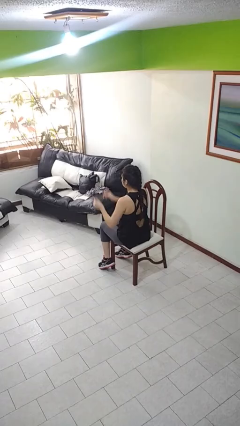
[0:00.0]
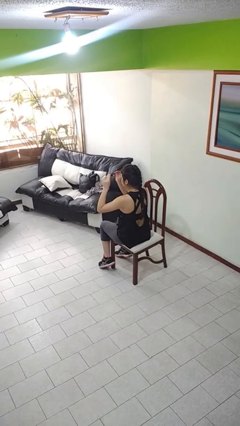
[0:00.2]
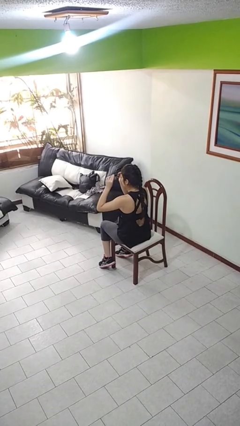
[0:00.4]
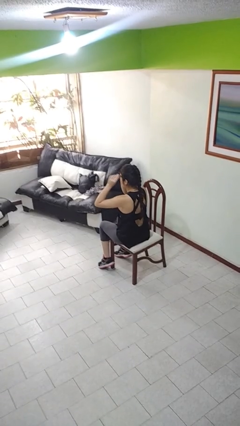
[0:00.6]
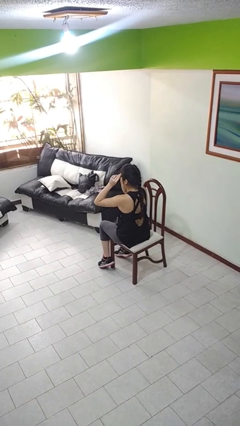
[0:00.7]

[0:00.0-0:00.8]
person puts on glasses

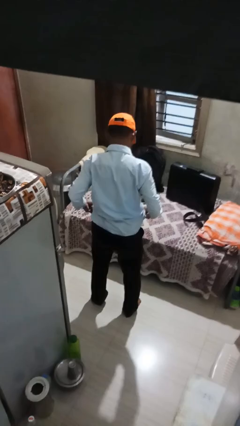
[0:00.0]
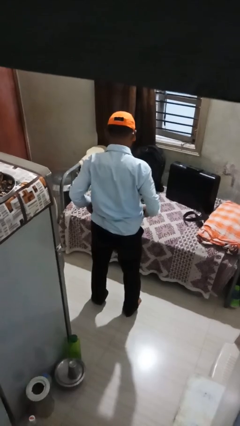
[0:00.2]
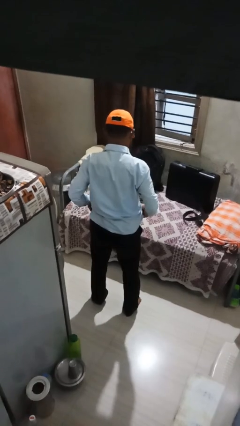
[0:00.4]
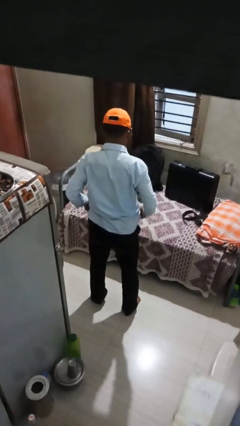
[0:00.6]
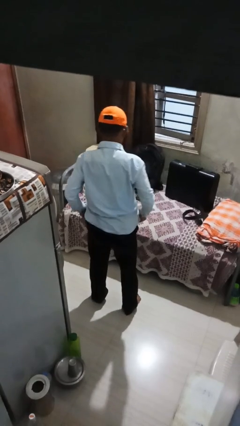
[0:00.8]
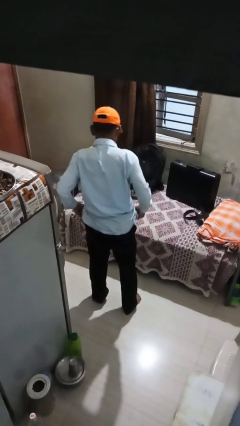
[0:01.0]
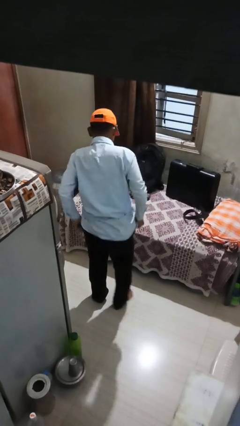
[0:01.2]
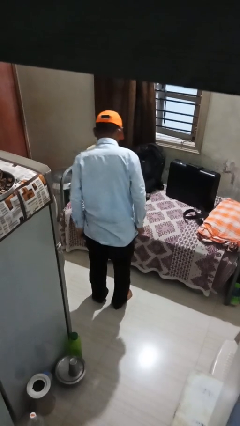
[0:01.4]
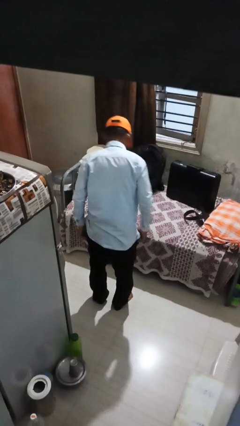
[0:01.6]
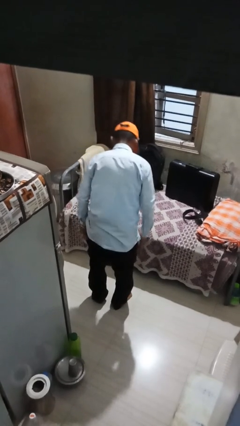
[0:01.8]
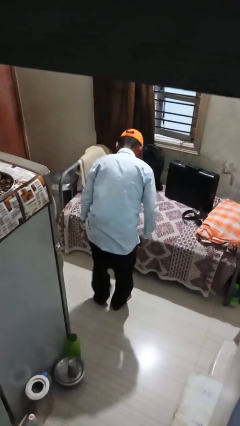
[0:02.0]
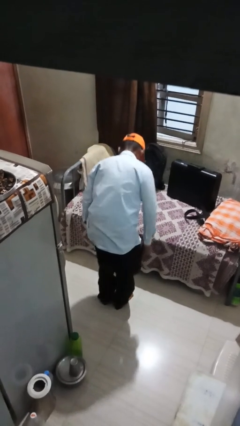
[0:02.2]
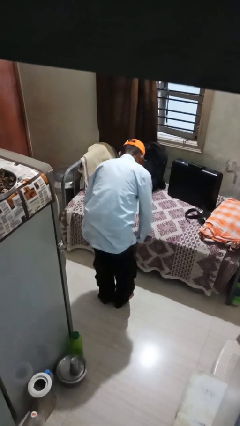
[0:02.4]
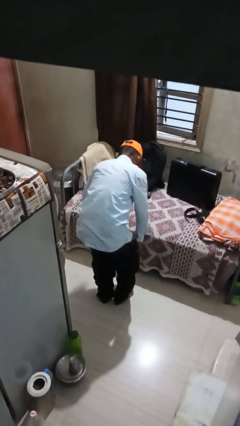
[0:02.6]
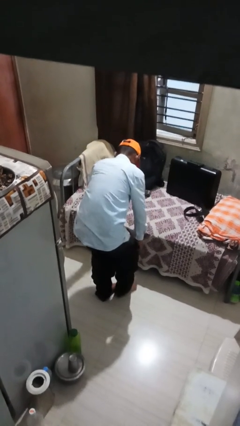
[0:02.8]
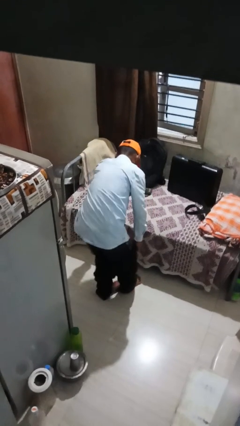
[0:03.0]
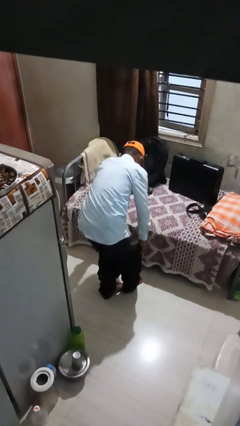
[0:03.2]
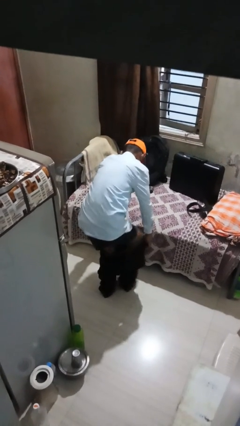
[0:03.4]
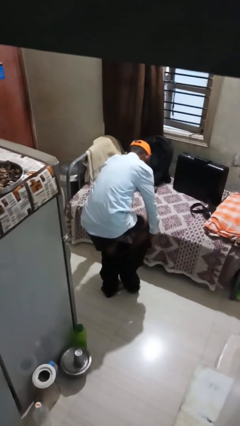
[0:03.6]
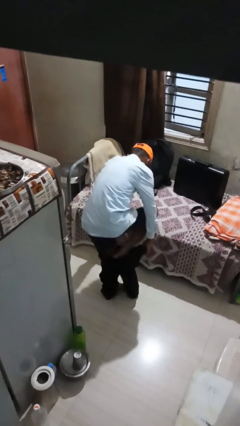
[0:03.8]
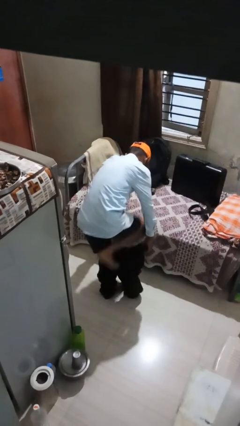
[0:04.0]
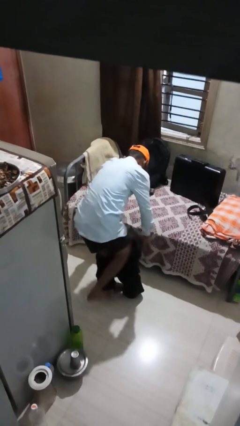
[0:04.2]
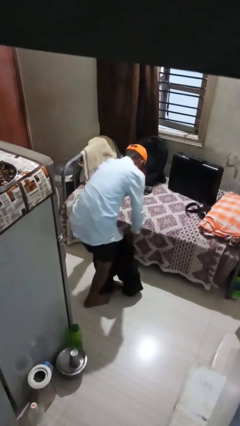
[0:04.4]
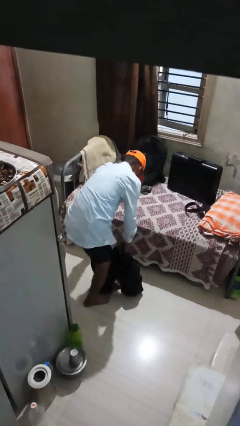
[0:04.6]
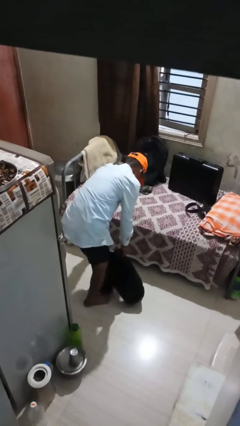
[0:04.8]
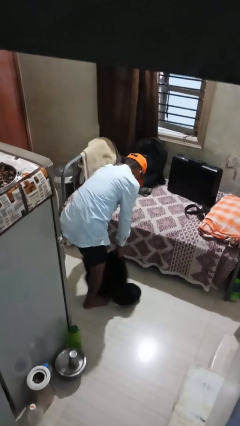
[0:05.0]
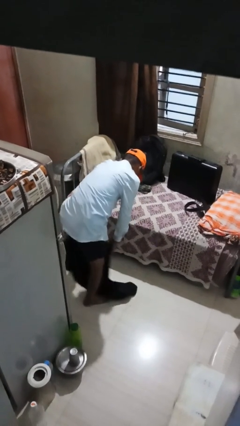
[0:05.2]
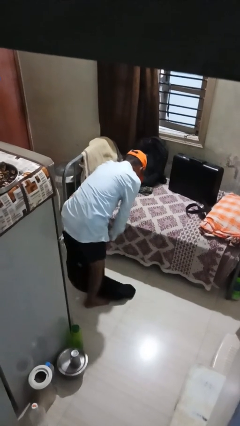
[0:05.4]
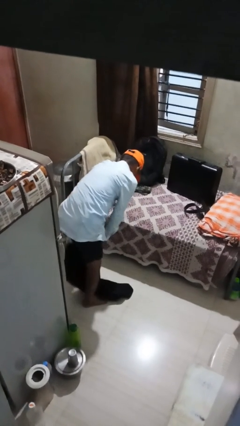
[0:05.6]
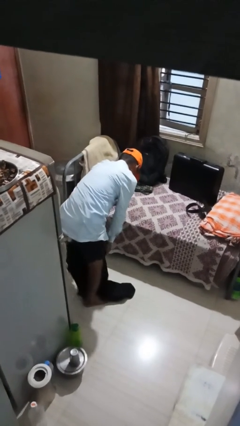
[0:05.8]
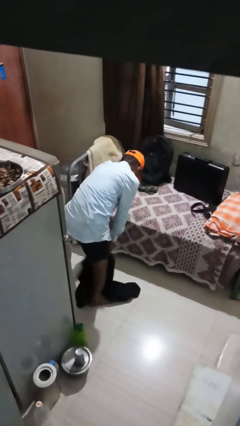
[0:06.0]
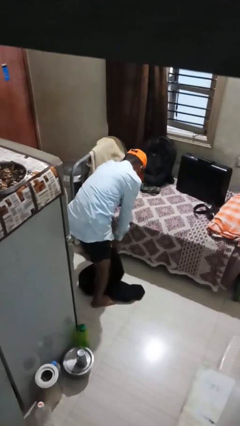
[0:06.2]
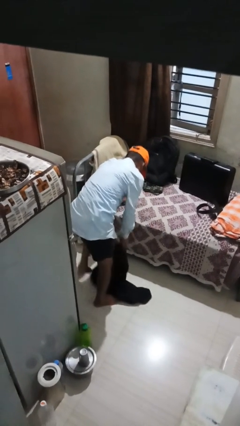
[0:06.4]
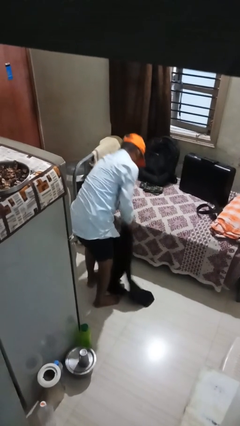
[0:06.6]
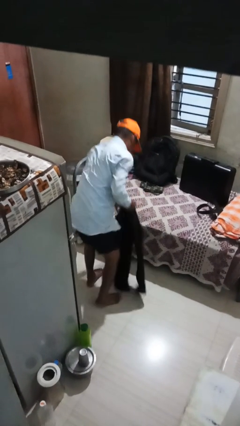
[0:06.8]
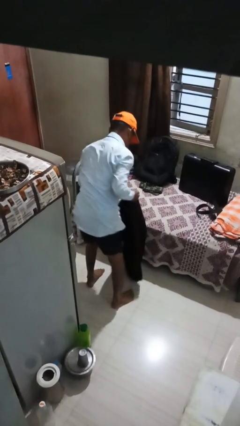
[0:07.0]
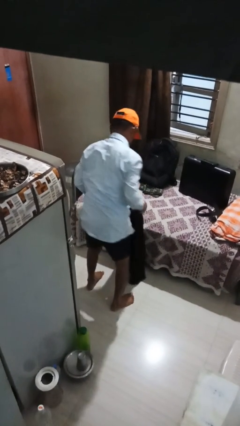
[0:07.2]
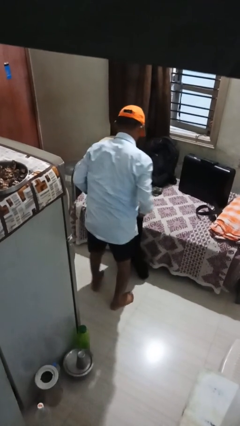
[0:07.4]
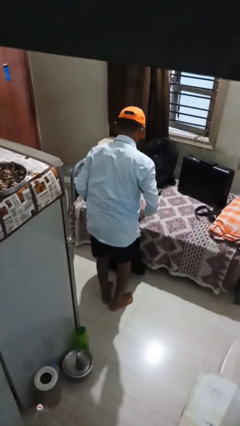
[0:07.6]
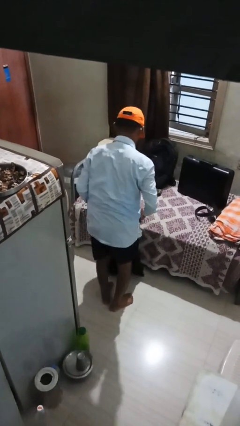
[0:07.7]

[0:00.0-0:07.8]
person takes off pants

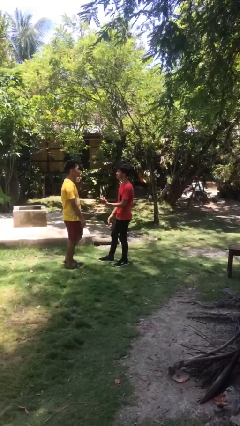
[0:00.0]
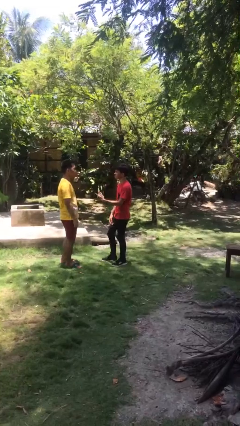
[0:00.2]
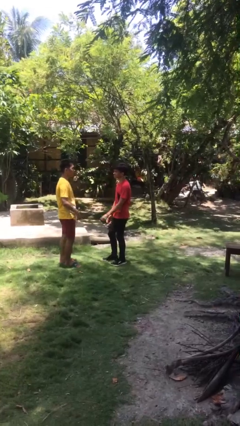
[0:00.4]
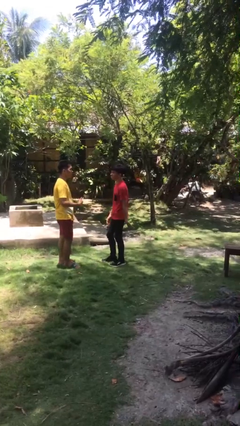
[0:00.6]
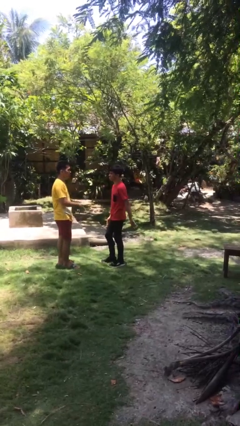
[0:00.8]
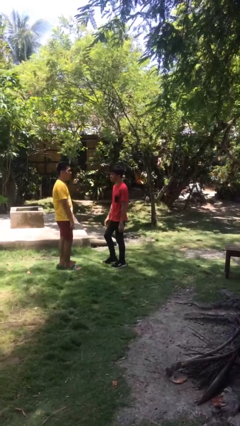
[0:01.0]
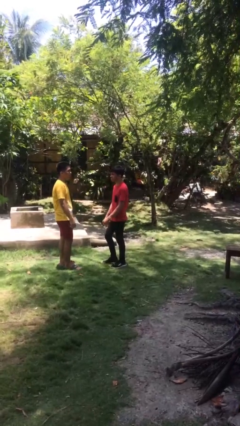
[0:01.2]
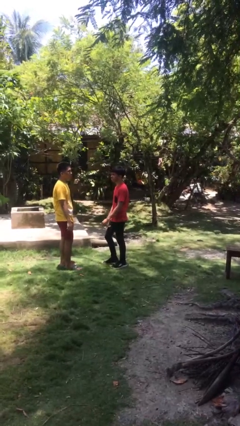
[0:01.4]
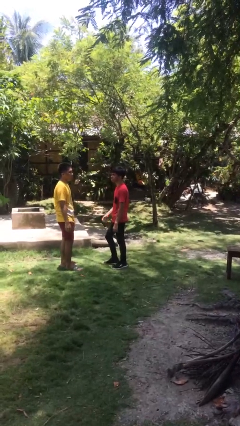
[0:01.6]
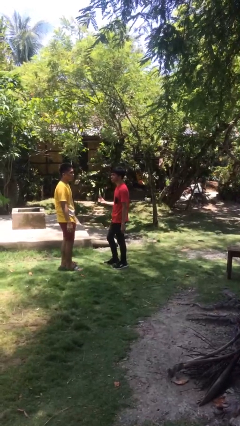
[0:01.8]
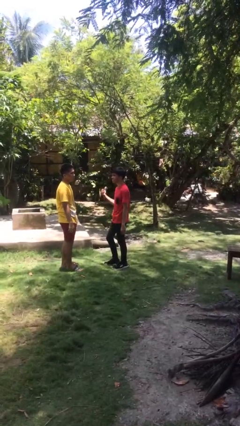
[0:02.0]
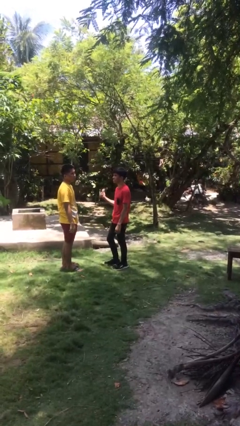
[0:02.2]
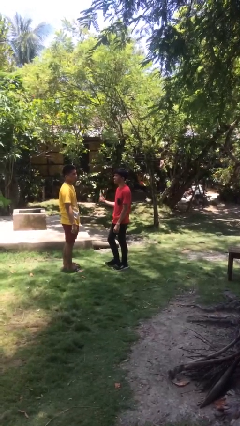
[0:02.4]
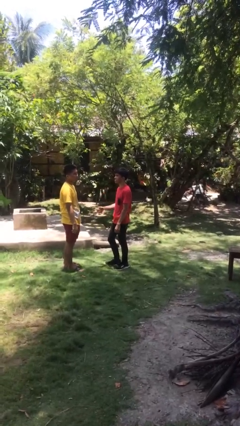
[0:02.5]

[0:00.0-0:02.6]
person talks to person

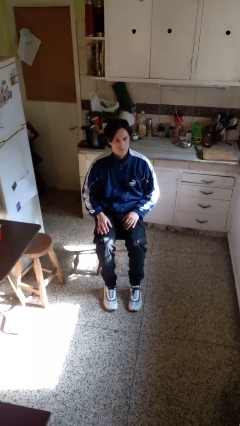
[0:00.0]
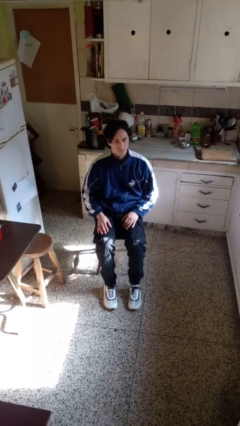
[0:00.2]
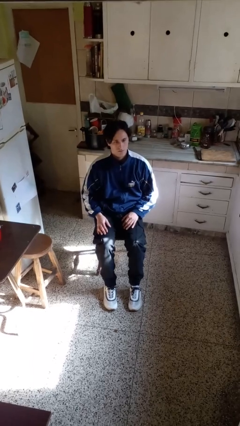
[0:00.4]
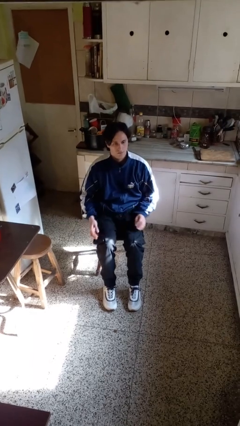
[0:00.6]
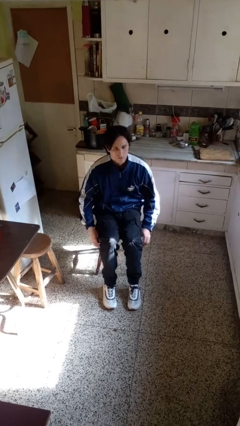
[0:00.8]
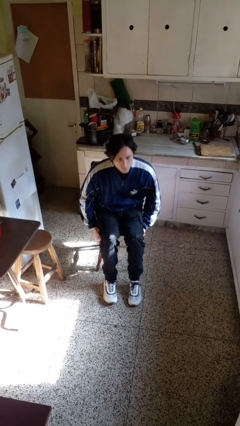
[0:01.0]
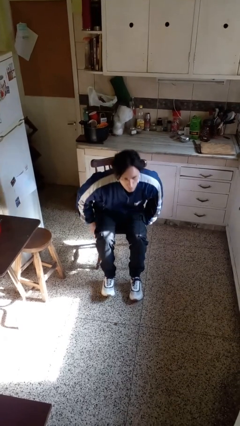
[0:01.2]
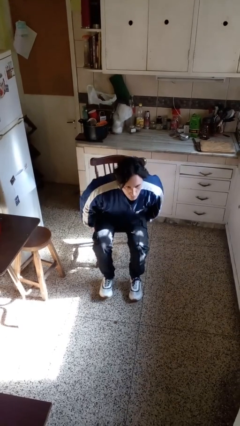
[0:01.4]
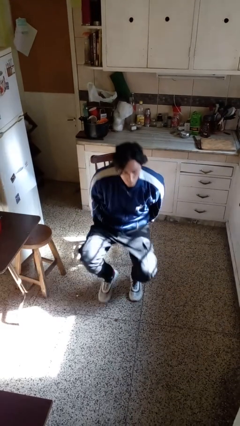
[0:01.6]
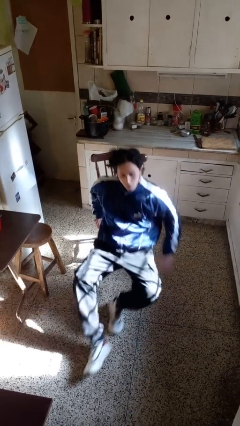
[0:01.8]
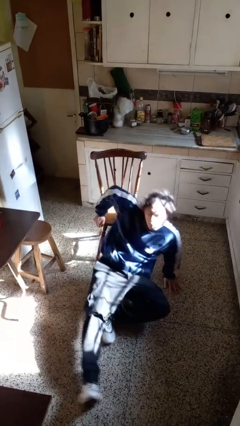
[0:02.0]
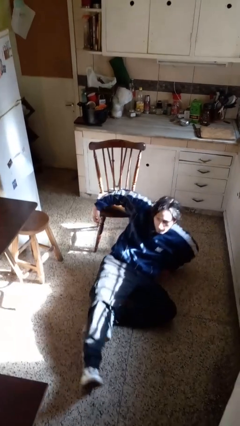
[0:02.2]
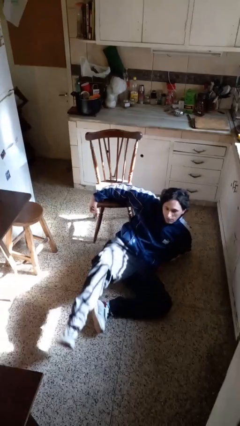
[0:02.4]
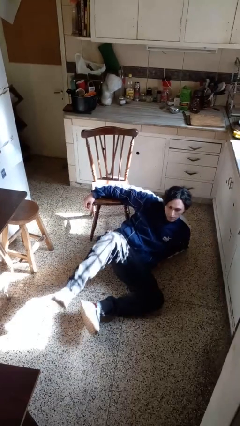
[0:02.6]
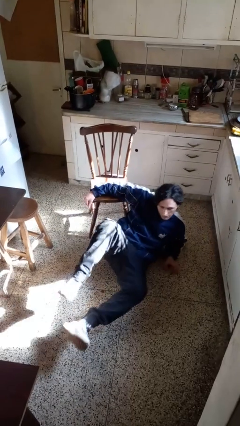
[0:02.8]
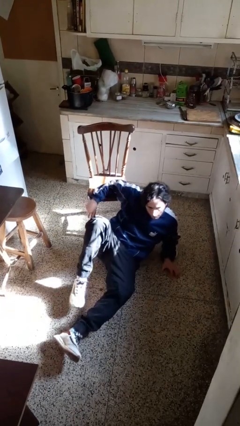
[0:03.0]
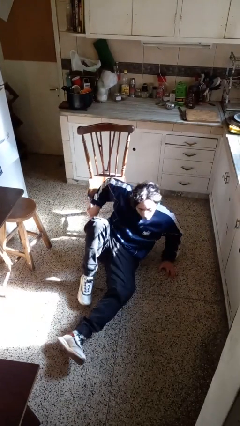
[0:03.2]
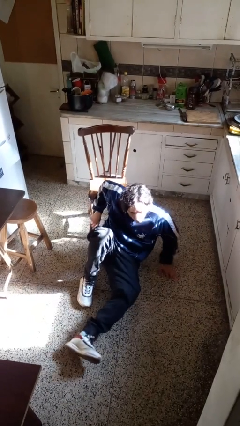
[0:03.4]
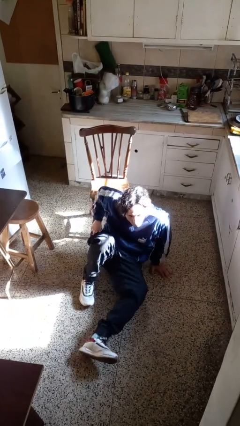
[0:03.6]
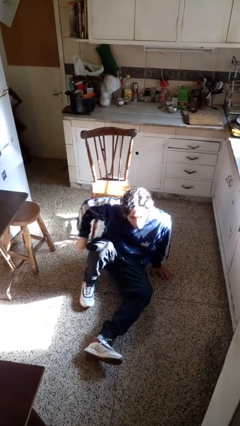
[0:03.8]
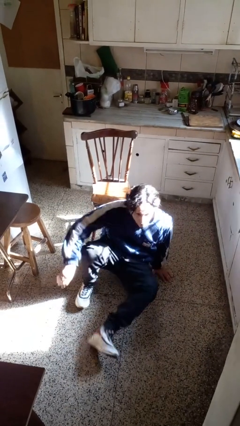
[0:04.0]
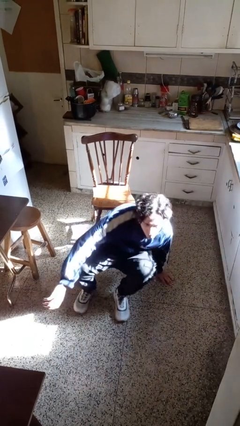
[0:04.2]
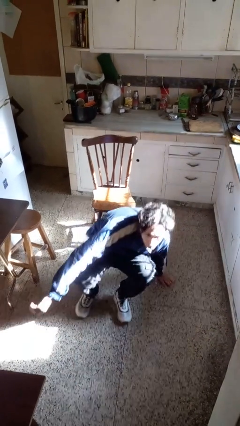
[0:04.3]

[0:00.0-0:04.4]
person falls from chair

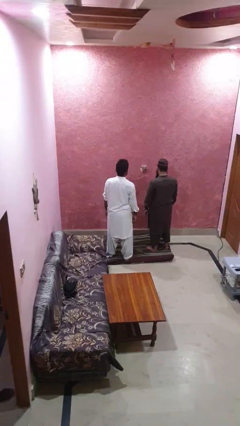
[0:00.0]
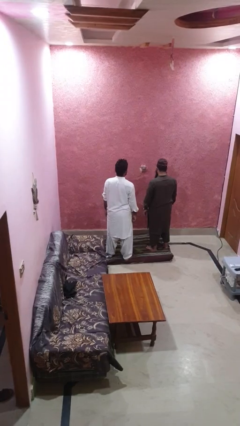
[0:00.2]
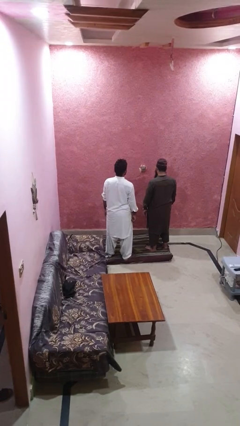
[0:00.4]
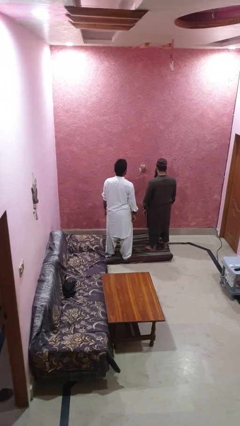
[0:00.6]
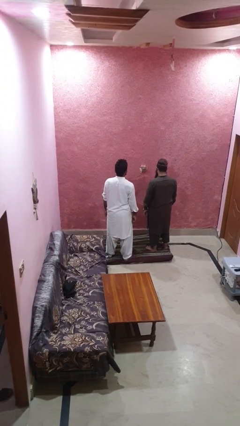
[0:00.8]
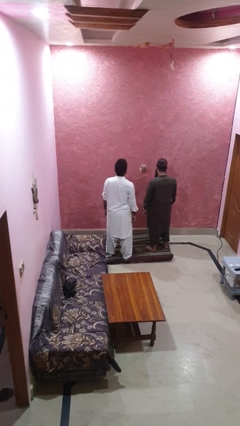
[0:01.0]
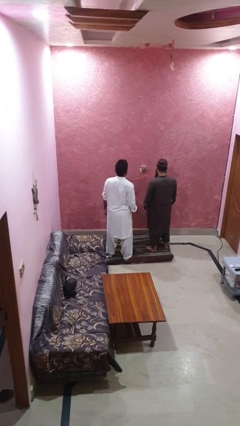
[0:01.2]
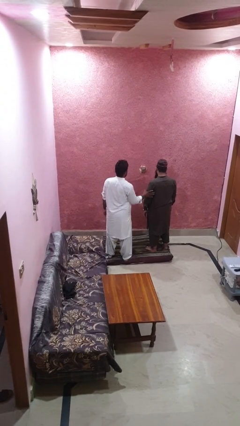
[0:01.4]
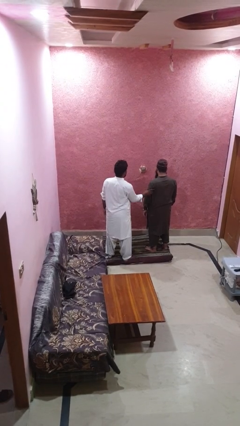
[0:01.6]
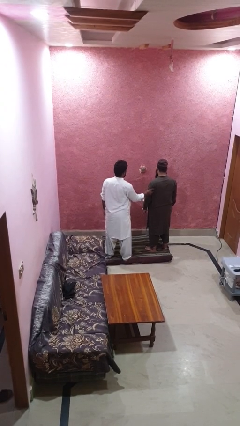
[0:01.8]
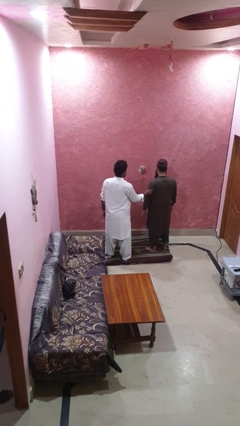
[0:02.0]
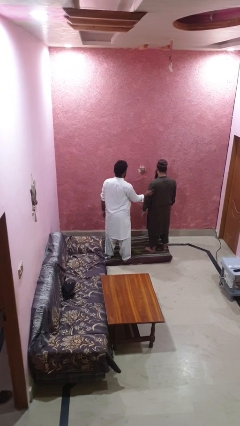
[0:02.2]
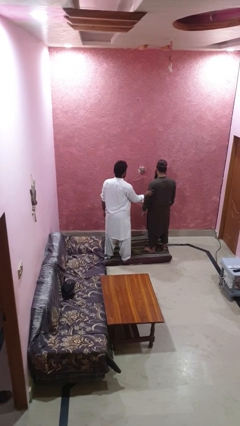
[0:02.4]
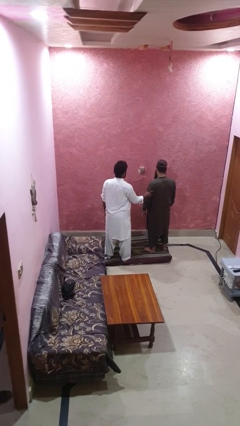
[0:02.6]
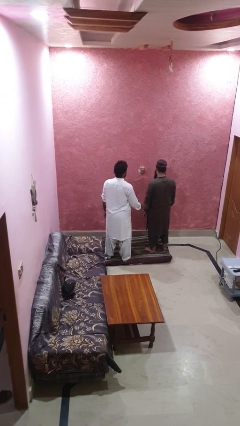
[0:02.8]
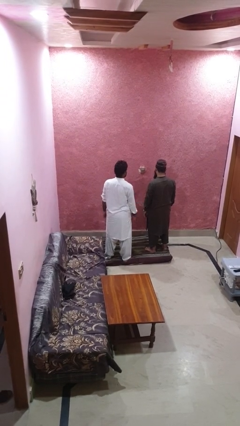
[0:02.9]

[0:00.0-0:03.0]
person grabs person by bicep
